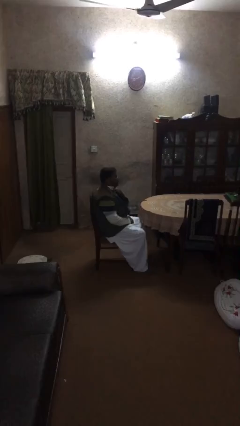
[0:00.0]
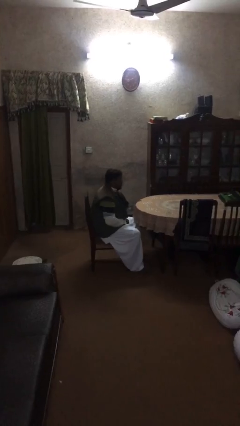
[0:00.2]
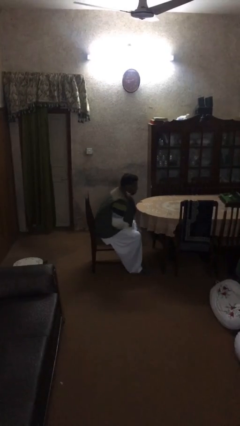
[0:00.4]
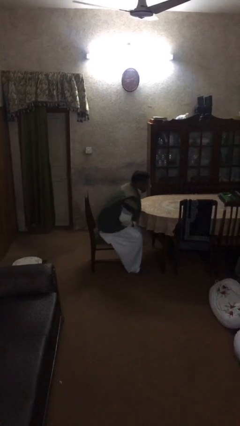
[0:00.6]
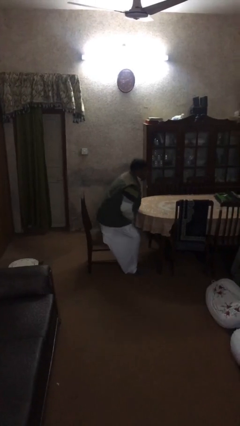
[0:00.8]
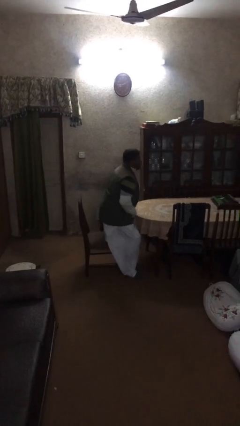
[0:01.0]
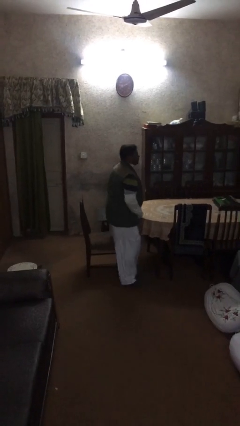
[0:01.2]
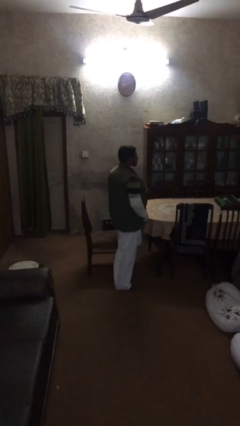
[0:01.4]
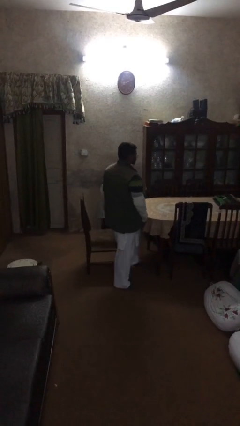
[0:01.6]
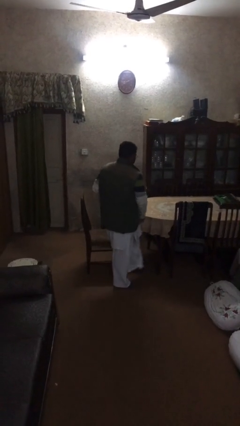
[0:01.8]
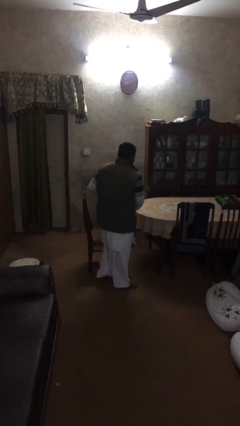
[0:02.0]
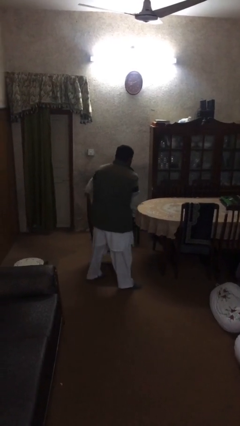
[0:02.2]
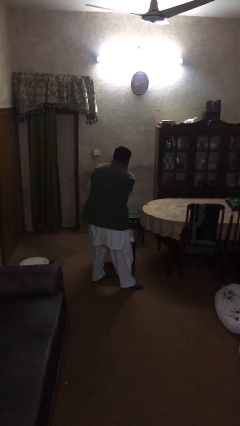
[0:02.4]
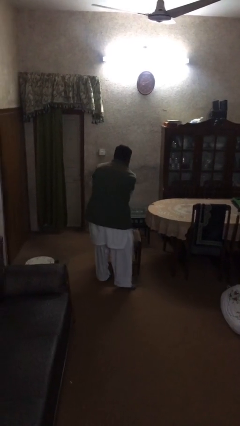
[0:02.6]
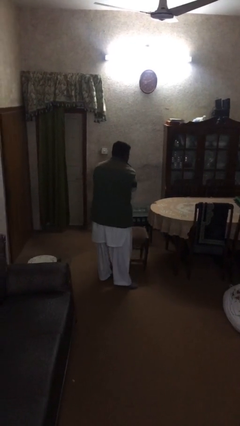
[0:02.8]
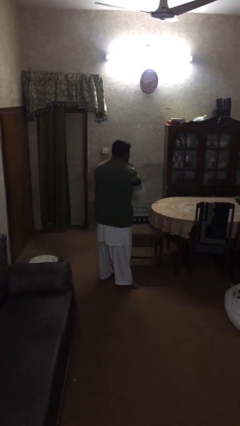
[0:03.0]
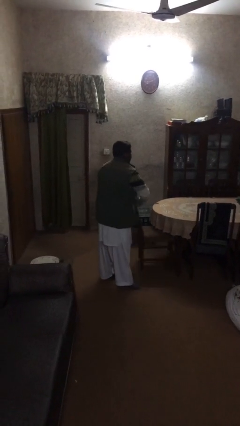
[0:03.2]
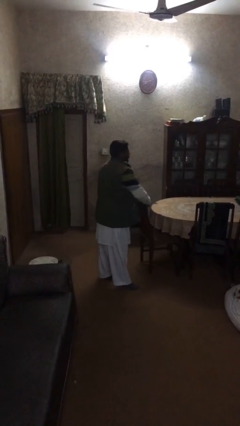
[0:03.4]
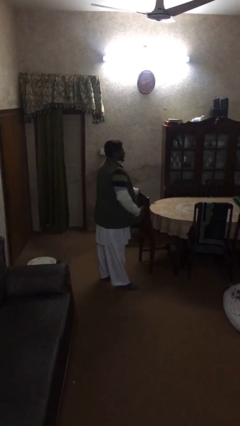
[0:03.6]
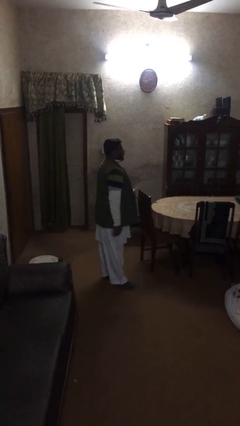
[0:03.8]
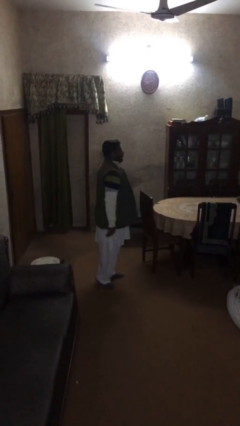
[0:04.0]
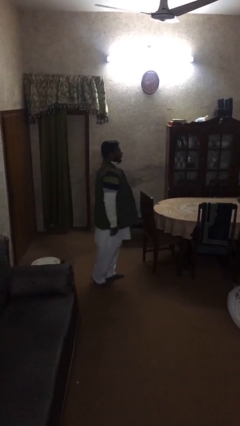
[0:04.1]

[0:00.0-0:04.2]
person stands up

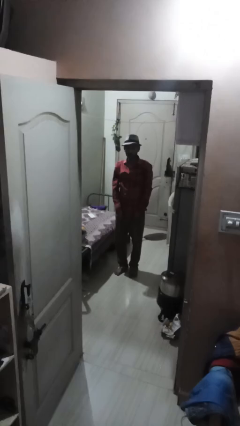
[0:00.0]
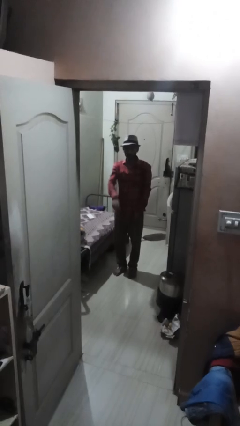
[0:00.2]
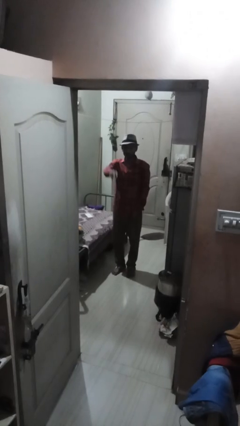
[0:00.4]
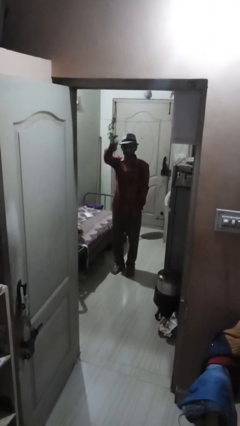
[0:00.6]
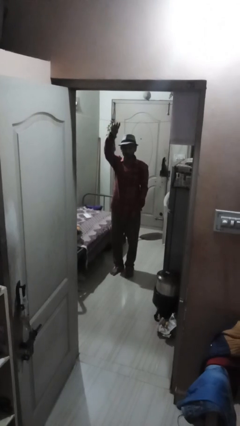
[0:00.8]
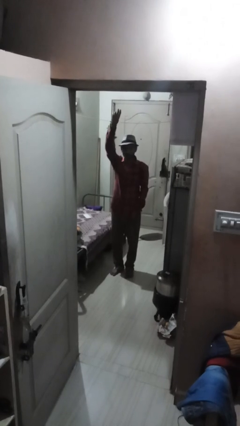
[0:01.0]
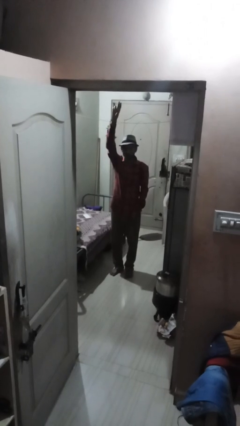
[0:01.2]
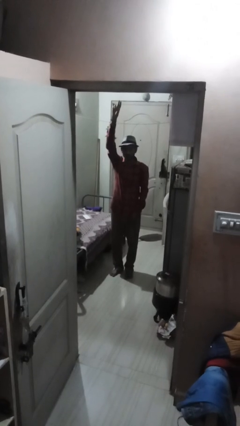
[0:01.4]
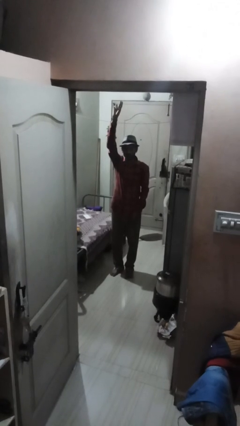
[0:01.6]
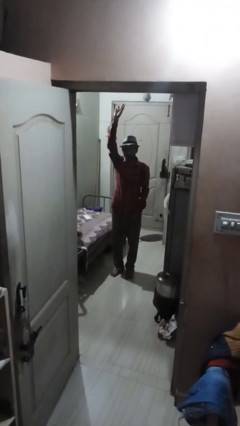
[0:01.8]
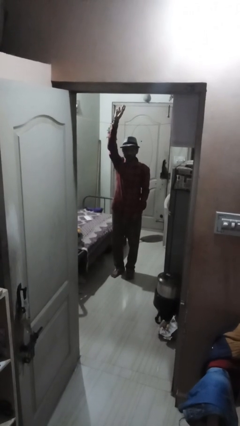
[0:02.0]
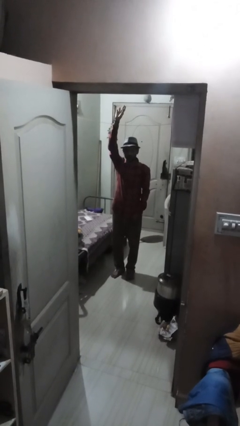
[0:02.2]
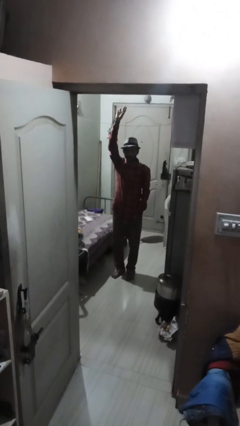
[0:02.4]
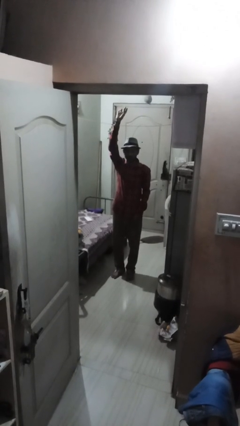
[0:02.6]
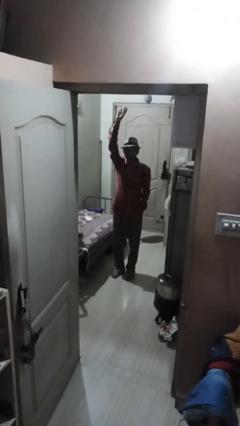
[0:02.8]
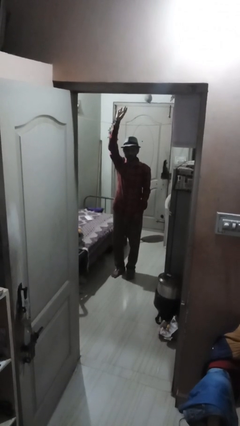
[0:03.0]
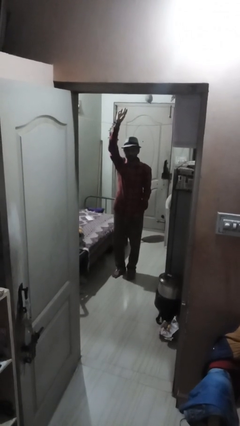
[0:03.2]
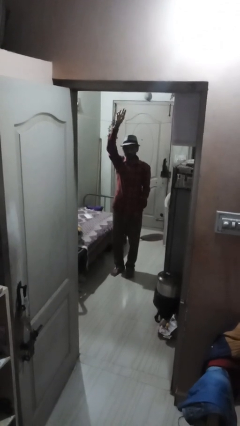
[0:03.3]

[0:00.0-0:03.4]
person gestures swipe up

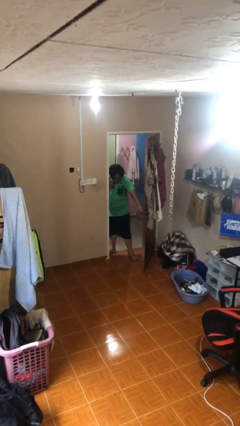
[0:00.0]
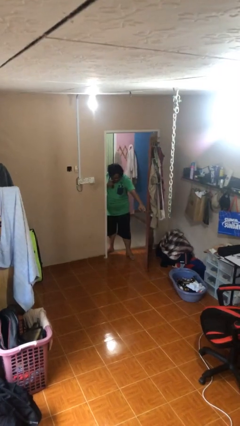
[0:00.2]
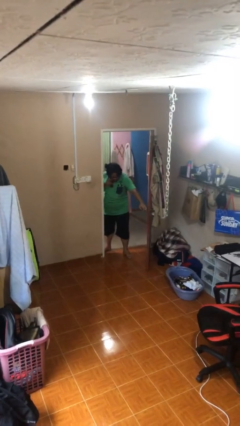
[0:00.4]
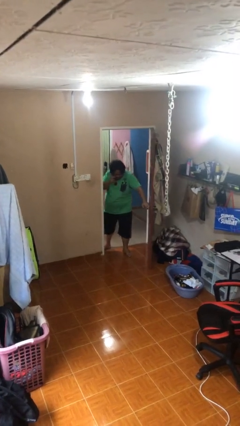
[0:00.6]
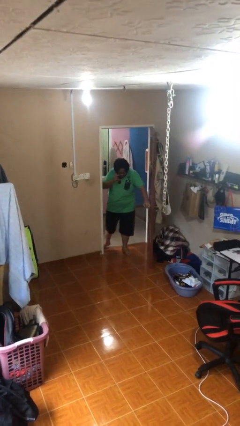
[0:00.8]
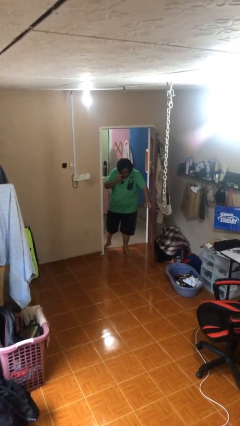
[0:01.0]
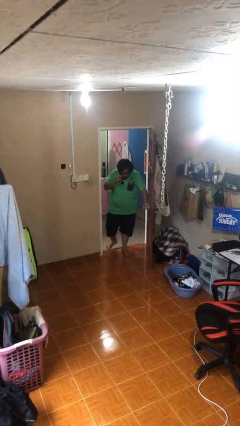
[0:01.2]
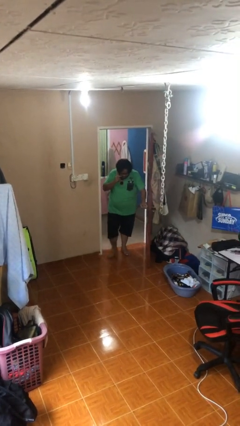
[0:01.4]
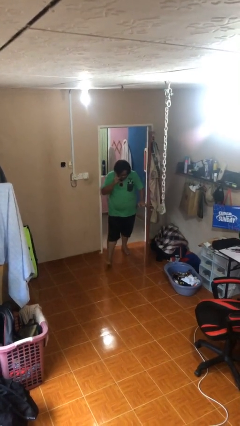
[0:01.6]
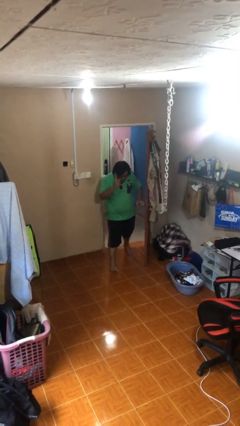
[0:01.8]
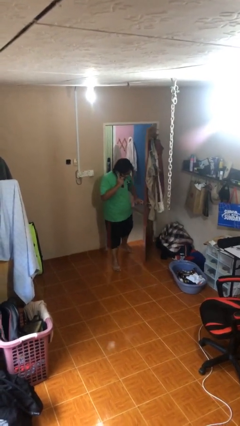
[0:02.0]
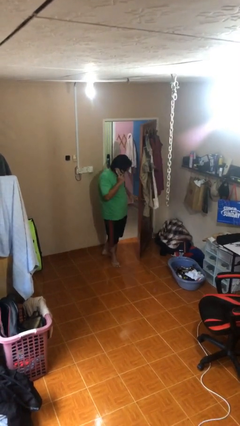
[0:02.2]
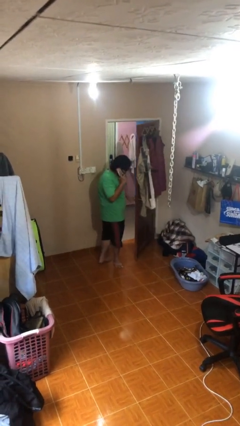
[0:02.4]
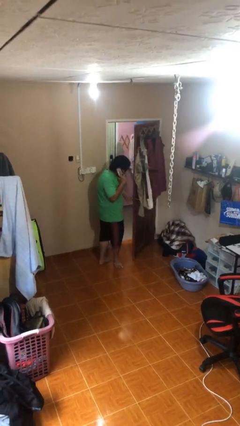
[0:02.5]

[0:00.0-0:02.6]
person enters scene through structure

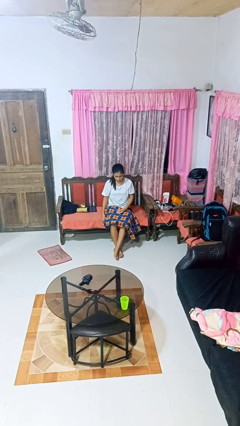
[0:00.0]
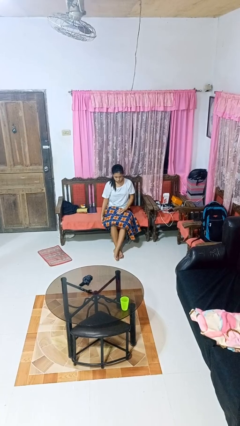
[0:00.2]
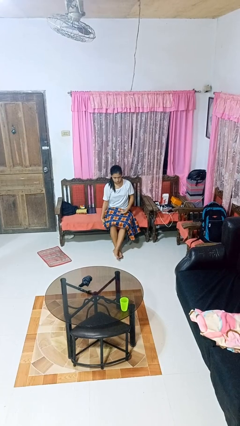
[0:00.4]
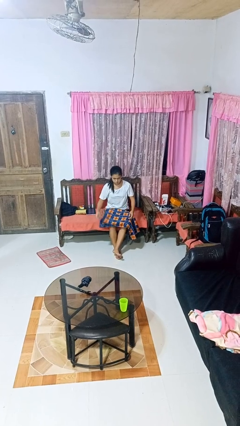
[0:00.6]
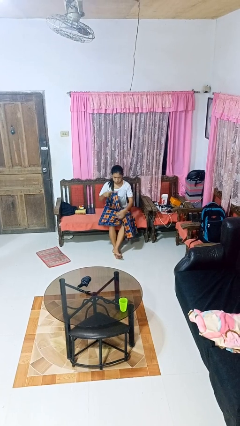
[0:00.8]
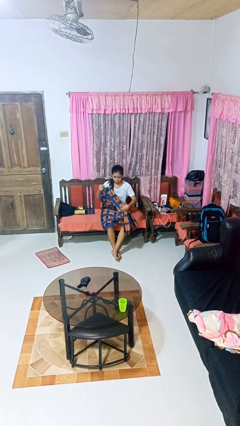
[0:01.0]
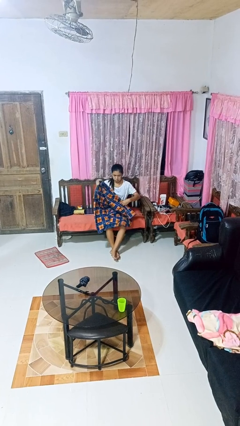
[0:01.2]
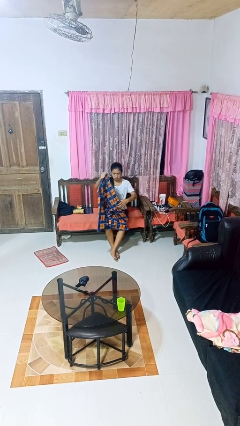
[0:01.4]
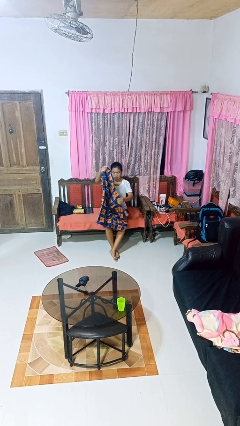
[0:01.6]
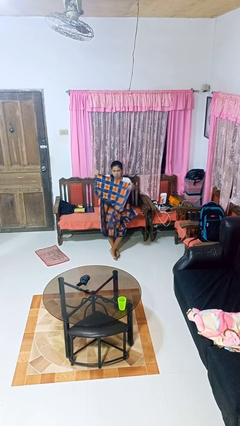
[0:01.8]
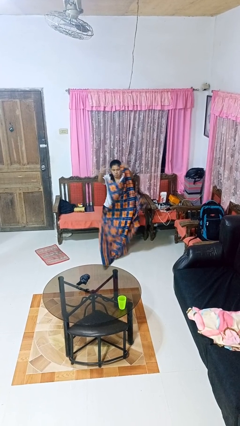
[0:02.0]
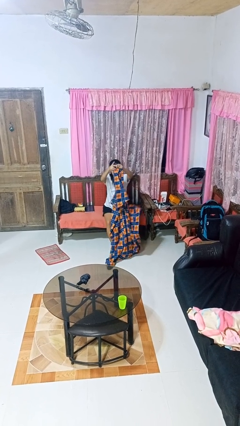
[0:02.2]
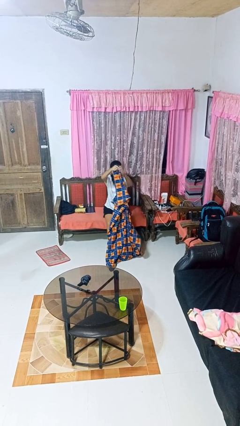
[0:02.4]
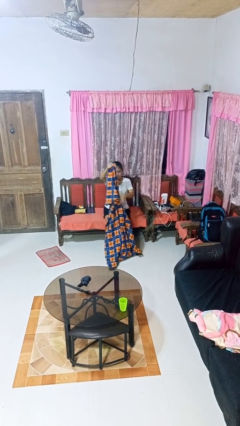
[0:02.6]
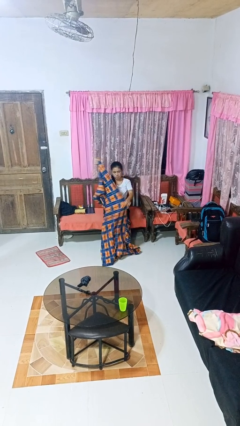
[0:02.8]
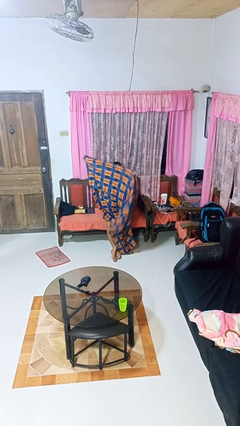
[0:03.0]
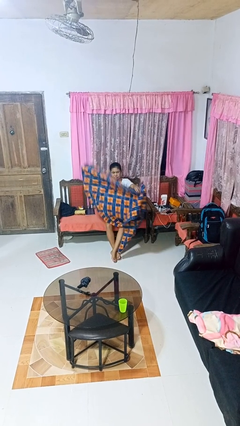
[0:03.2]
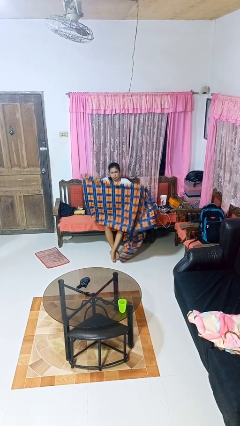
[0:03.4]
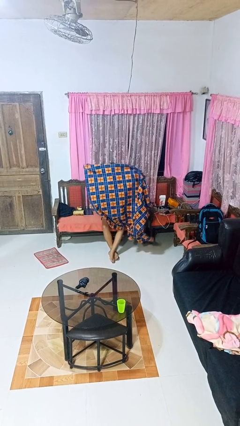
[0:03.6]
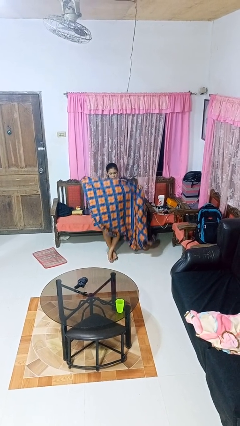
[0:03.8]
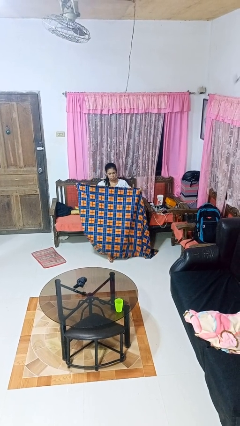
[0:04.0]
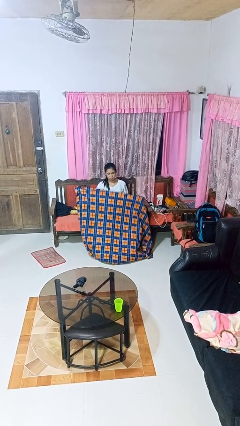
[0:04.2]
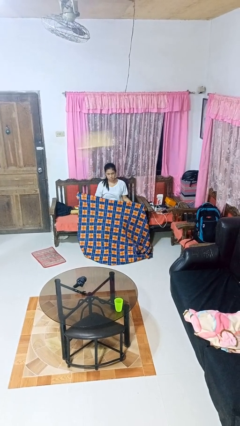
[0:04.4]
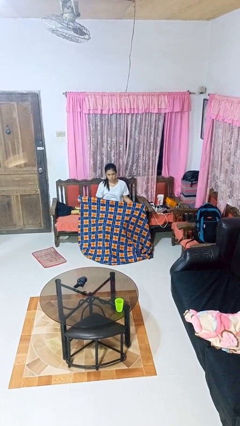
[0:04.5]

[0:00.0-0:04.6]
person unfolds blanket

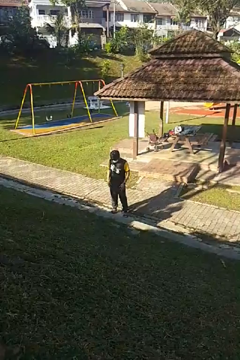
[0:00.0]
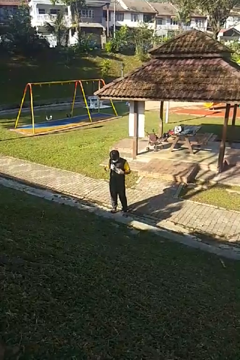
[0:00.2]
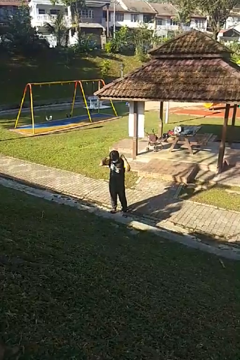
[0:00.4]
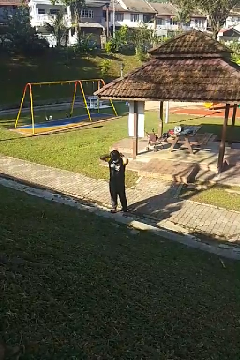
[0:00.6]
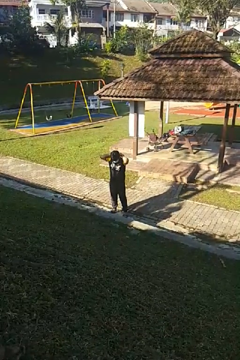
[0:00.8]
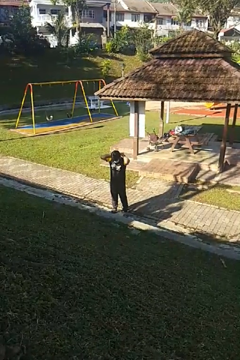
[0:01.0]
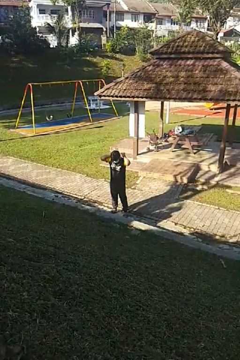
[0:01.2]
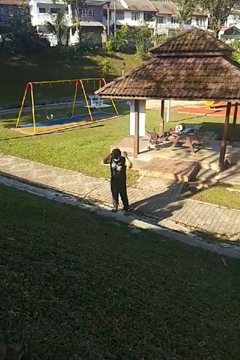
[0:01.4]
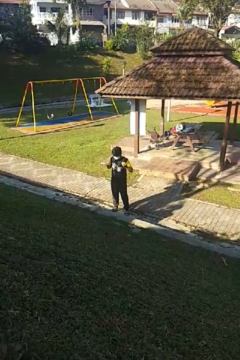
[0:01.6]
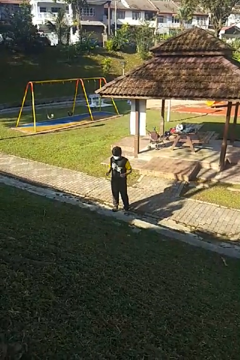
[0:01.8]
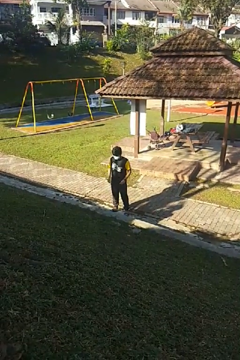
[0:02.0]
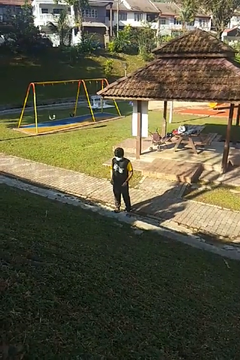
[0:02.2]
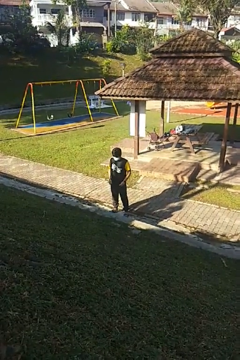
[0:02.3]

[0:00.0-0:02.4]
person takes off necklace

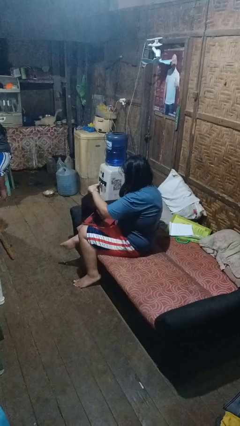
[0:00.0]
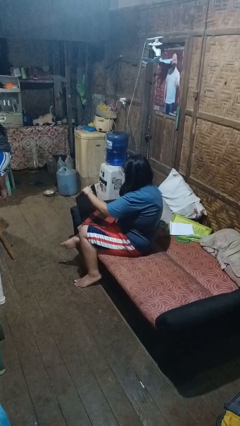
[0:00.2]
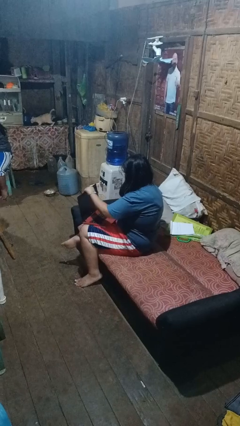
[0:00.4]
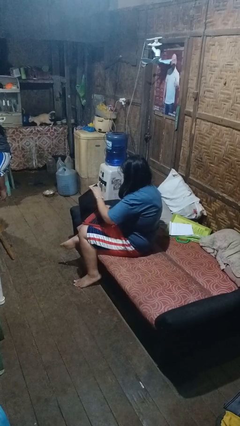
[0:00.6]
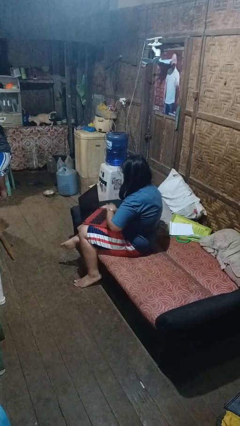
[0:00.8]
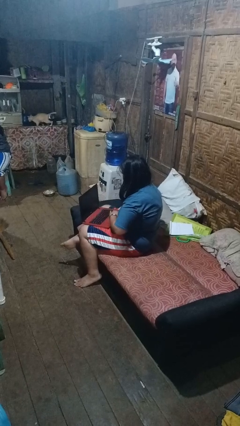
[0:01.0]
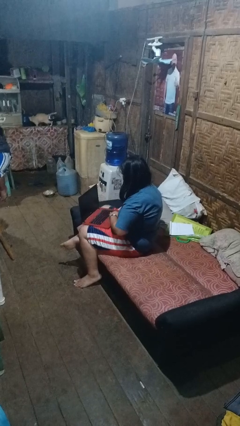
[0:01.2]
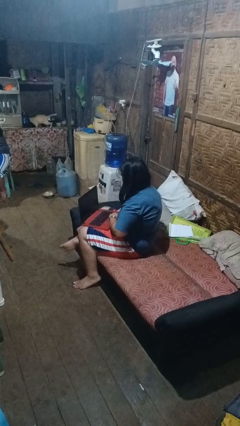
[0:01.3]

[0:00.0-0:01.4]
person opens laptop
